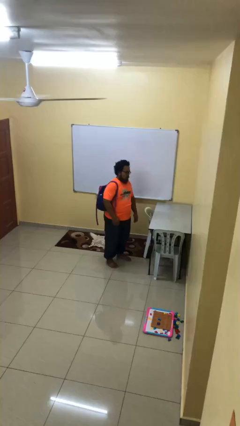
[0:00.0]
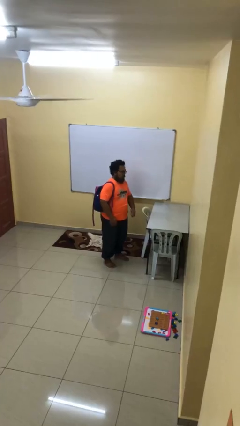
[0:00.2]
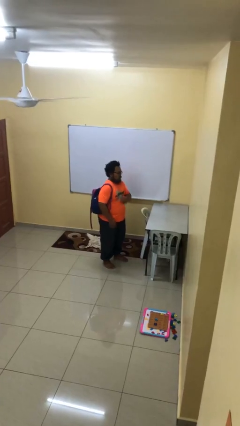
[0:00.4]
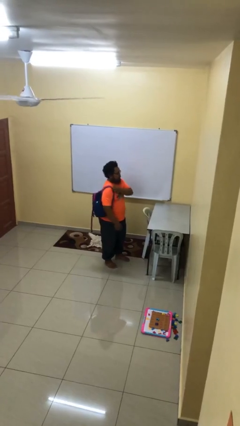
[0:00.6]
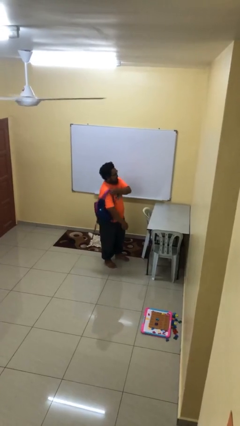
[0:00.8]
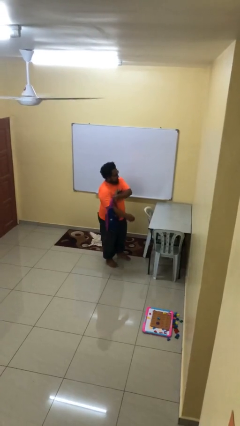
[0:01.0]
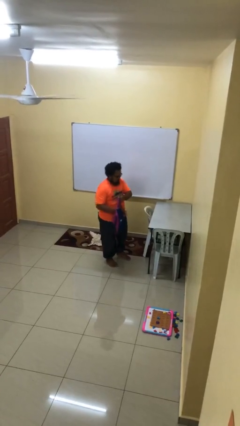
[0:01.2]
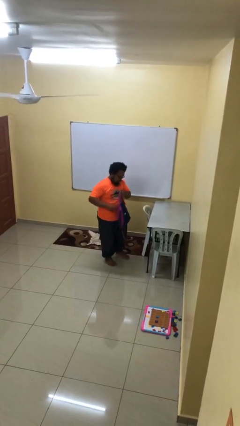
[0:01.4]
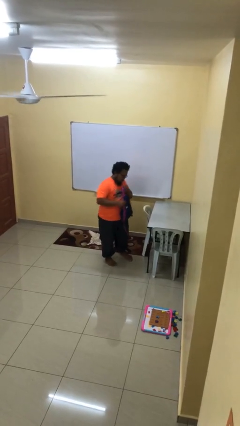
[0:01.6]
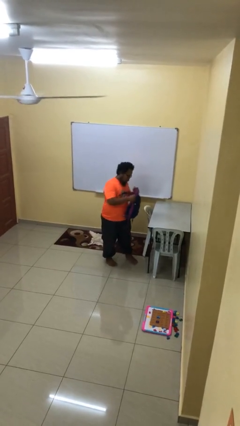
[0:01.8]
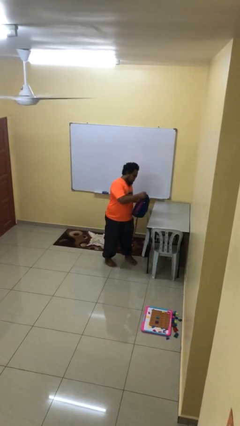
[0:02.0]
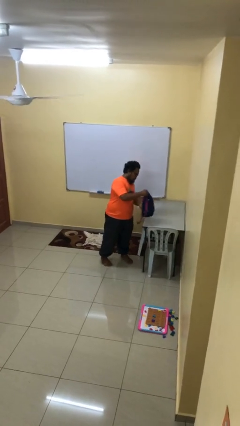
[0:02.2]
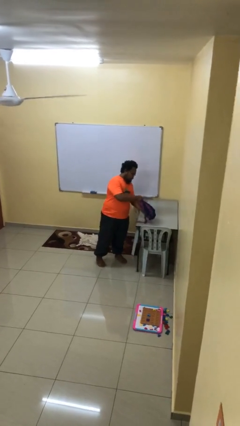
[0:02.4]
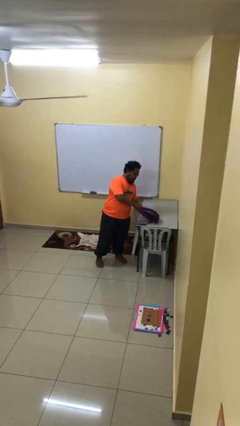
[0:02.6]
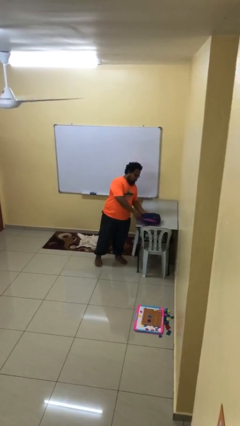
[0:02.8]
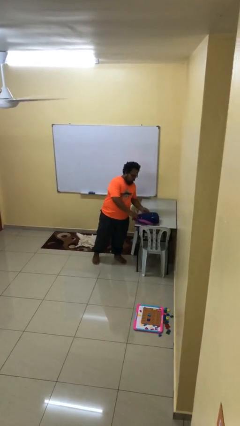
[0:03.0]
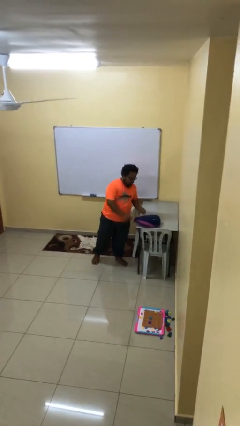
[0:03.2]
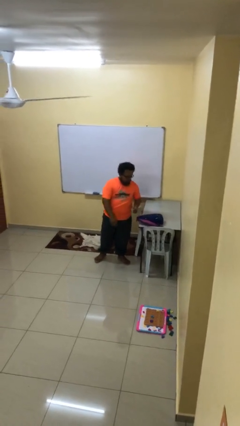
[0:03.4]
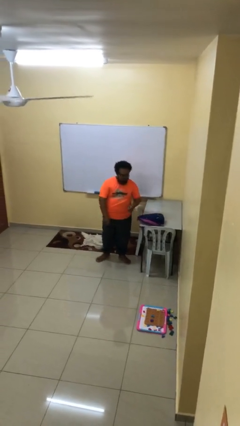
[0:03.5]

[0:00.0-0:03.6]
person puts down object on table

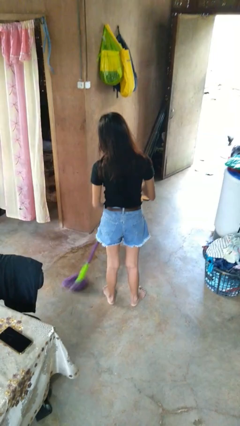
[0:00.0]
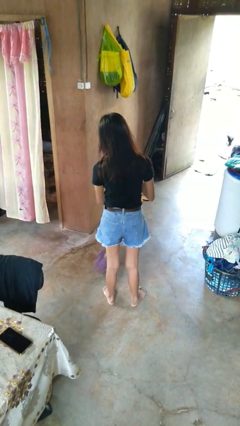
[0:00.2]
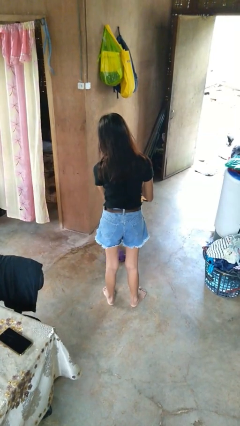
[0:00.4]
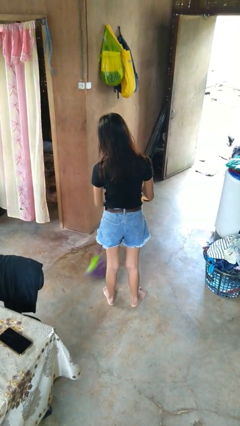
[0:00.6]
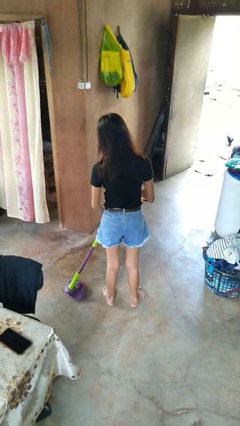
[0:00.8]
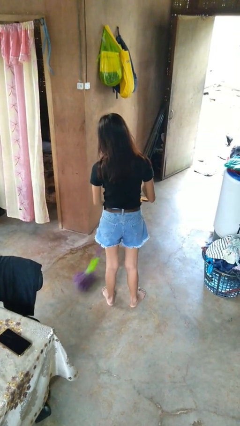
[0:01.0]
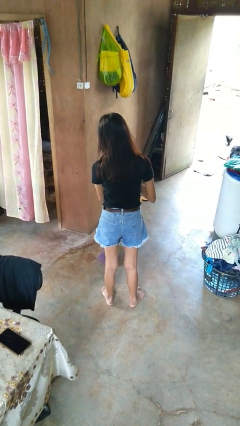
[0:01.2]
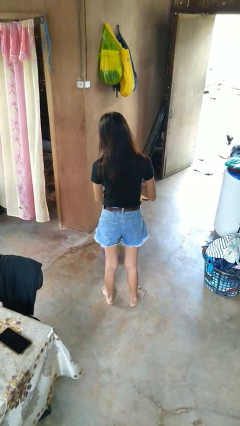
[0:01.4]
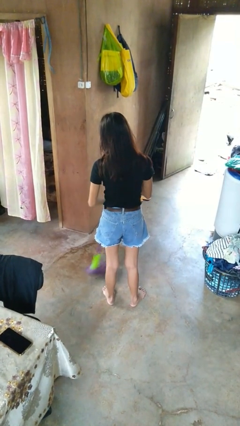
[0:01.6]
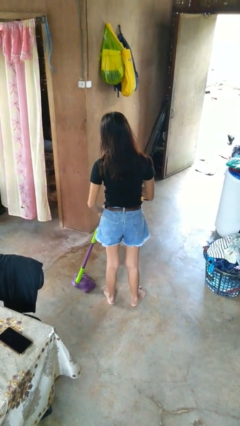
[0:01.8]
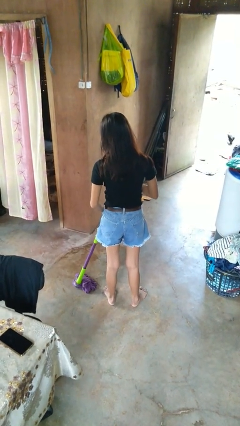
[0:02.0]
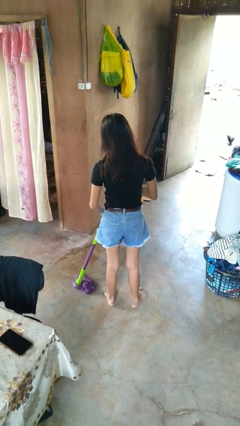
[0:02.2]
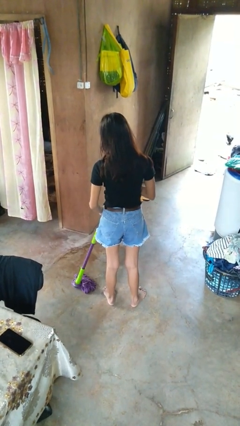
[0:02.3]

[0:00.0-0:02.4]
person mops

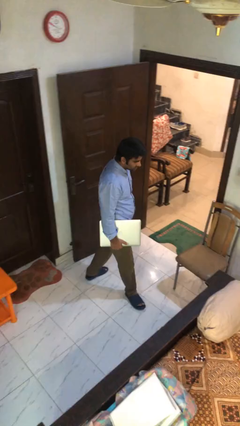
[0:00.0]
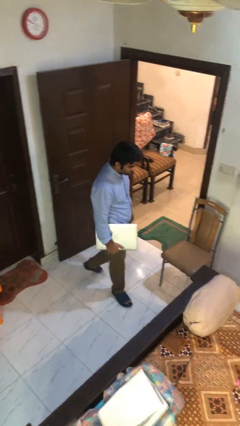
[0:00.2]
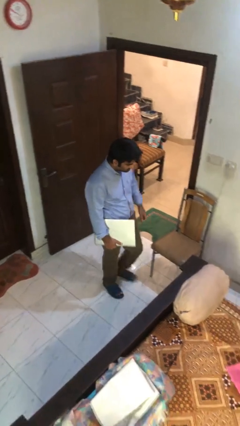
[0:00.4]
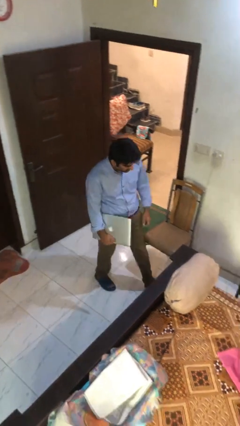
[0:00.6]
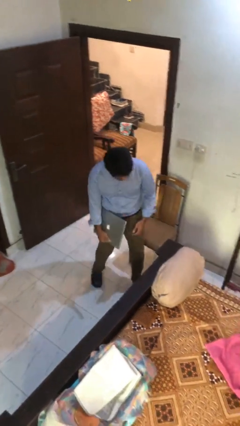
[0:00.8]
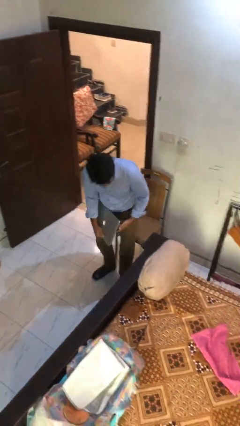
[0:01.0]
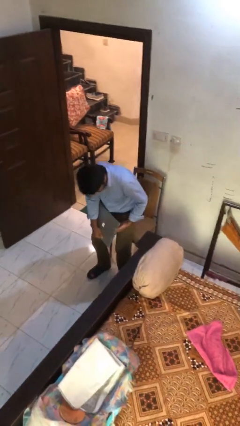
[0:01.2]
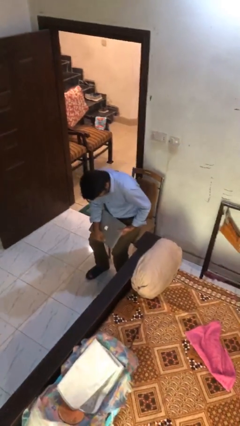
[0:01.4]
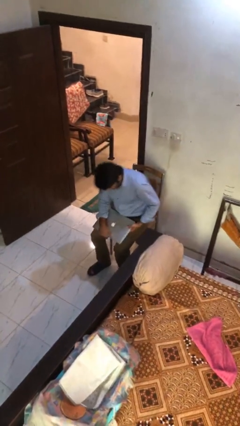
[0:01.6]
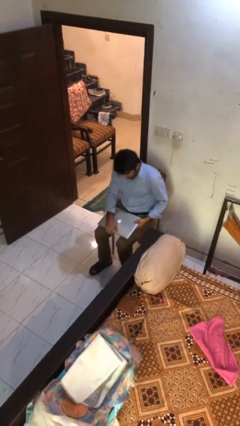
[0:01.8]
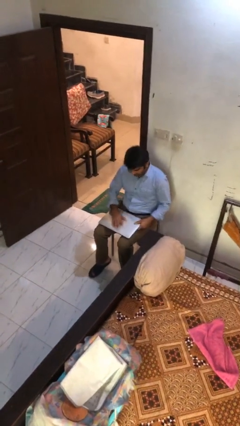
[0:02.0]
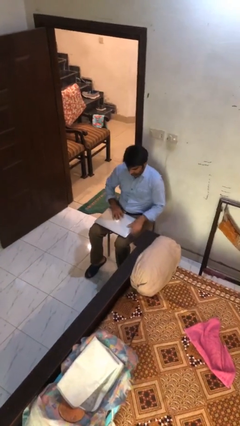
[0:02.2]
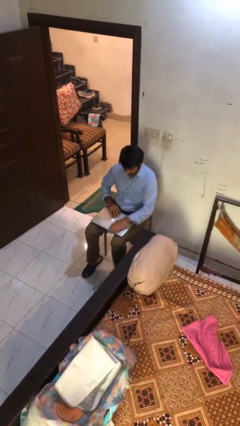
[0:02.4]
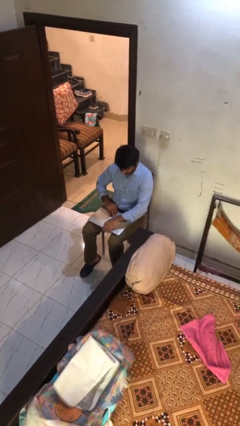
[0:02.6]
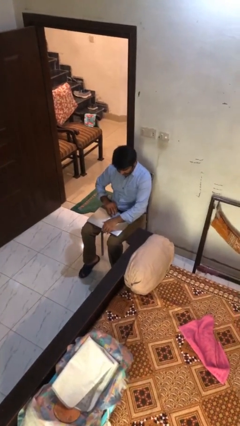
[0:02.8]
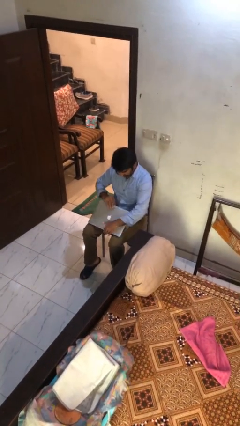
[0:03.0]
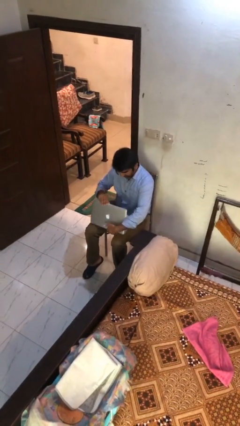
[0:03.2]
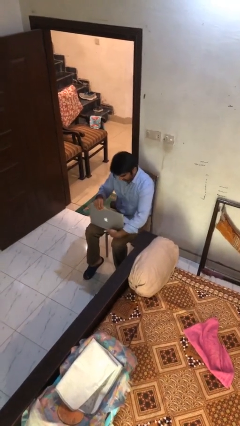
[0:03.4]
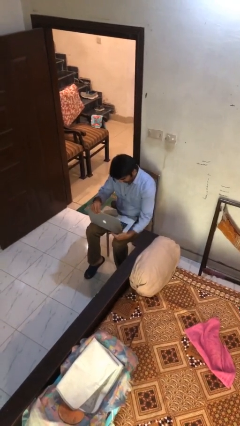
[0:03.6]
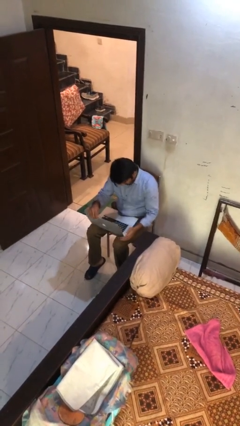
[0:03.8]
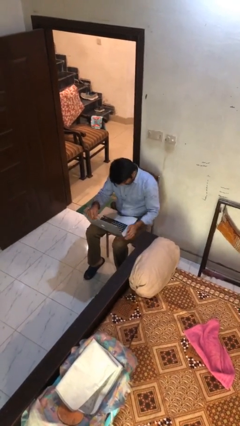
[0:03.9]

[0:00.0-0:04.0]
person sits down

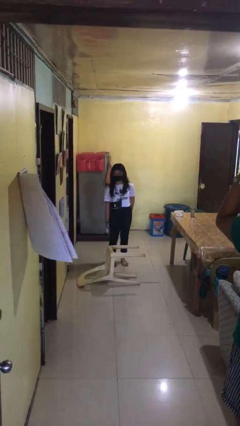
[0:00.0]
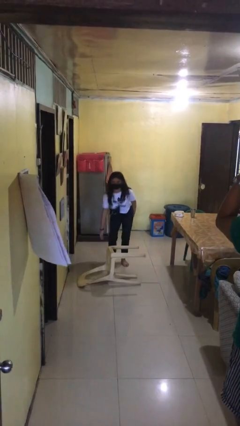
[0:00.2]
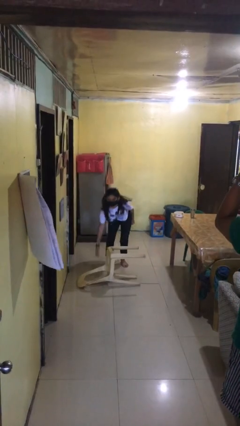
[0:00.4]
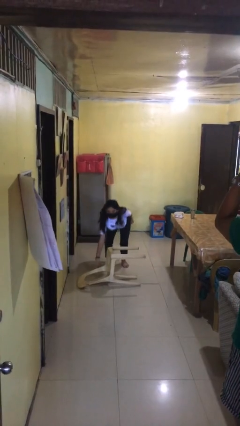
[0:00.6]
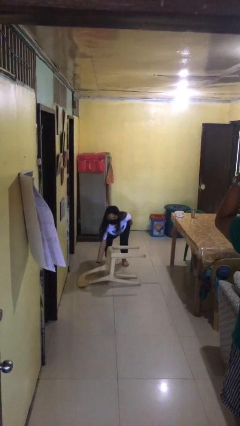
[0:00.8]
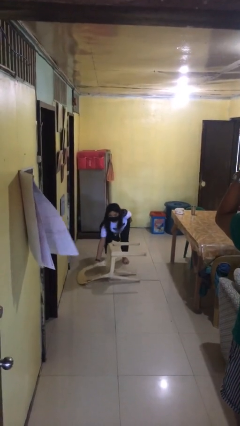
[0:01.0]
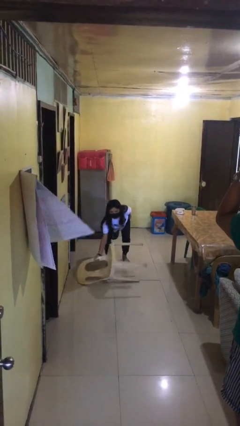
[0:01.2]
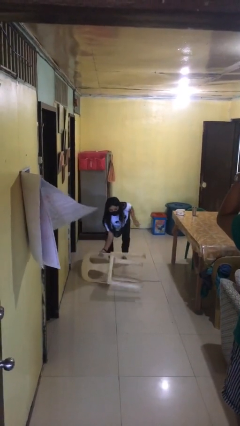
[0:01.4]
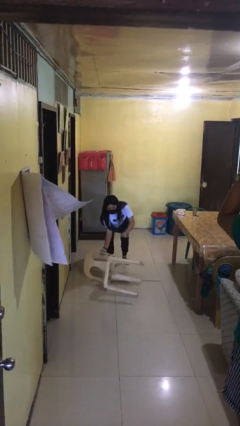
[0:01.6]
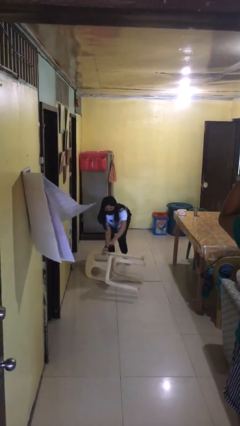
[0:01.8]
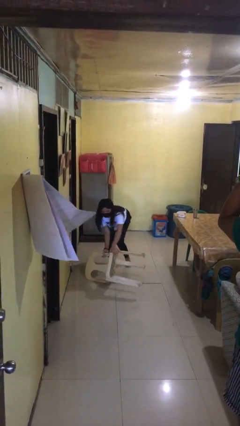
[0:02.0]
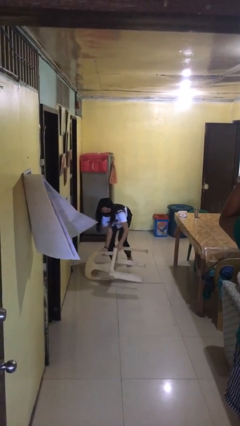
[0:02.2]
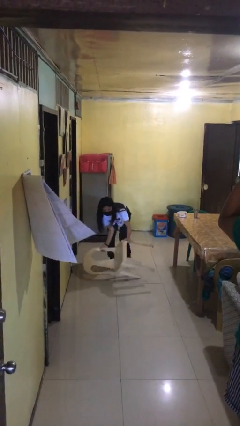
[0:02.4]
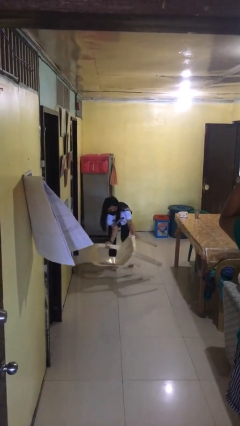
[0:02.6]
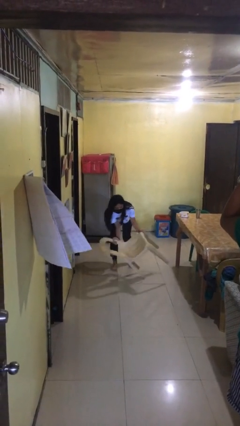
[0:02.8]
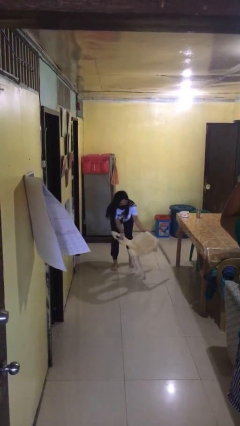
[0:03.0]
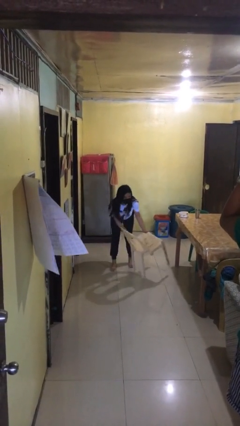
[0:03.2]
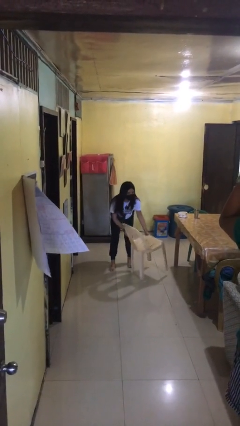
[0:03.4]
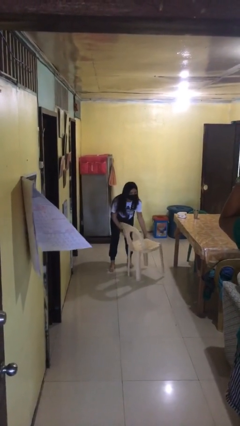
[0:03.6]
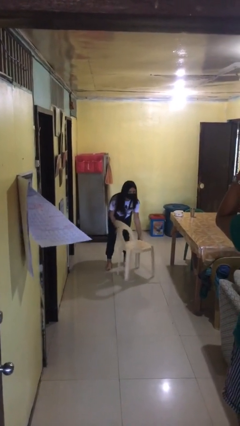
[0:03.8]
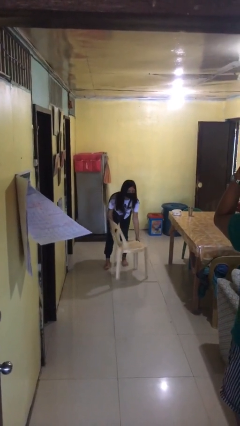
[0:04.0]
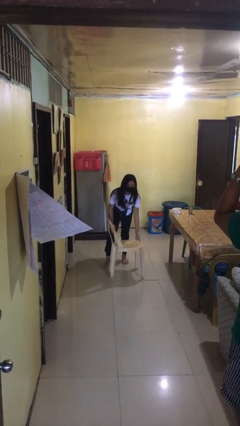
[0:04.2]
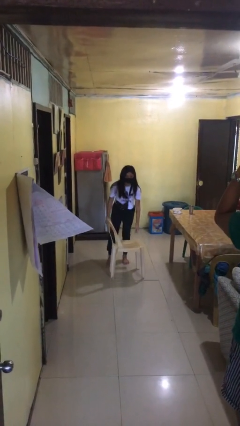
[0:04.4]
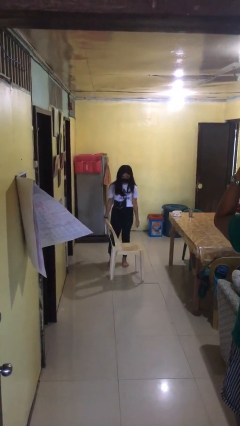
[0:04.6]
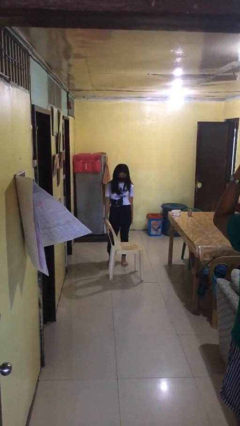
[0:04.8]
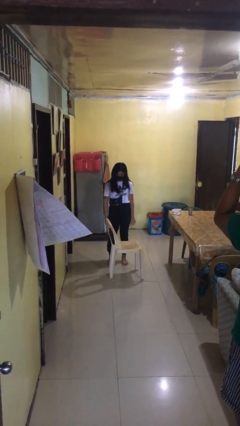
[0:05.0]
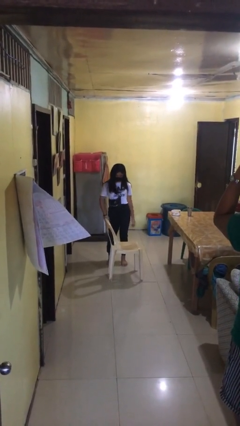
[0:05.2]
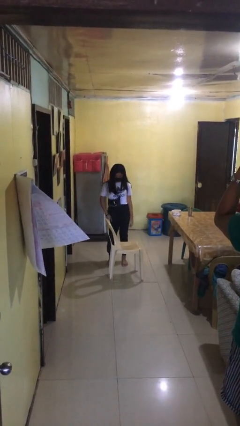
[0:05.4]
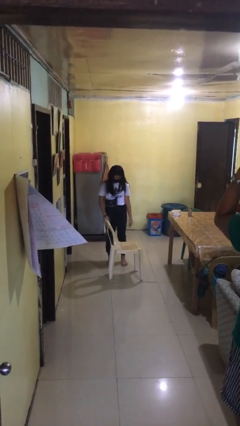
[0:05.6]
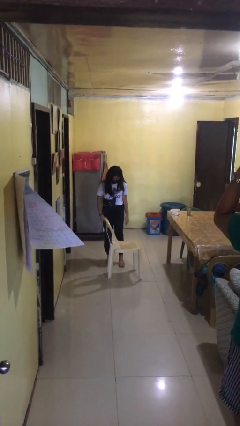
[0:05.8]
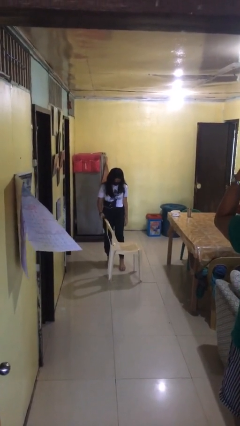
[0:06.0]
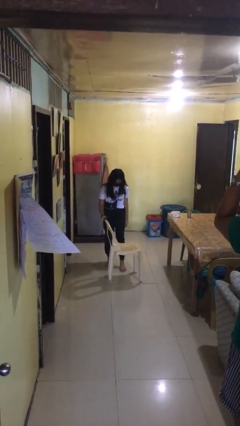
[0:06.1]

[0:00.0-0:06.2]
person sets upright furniture

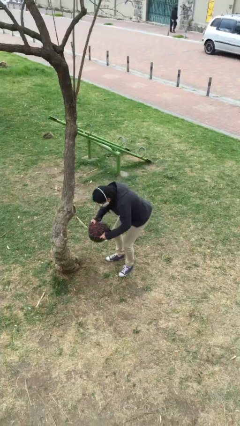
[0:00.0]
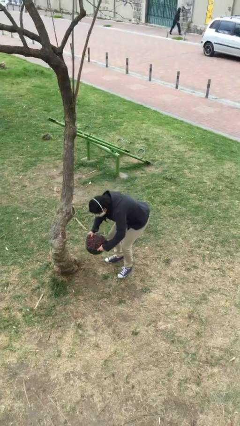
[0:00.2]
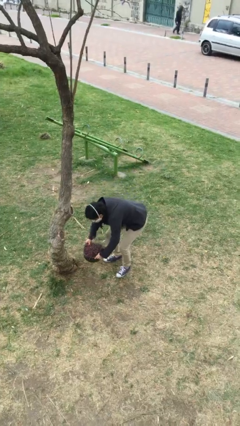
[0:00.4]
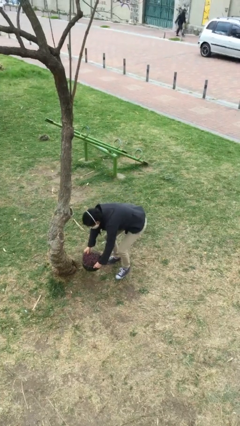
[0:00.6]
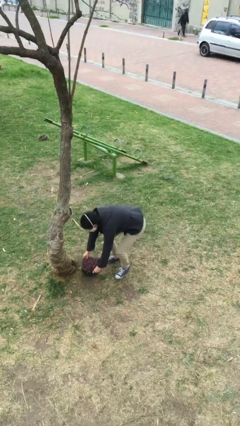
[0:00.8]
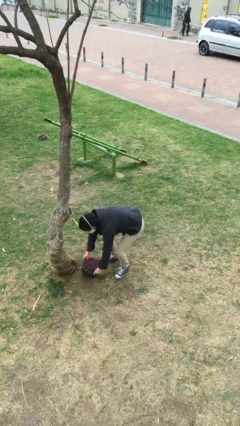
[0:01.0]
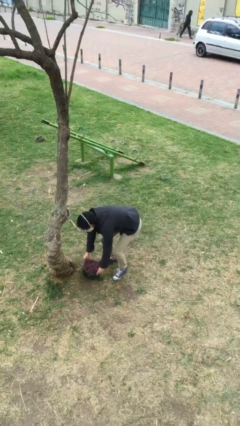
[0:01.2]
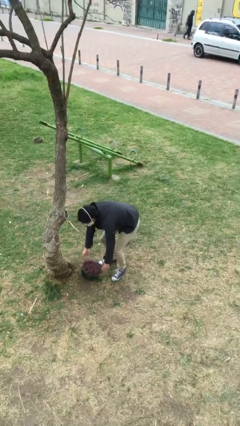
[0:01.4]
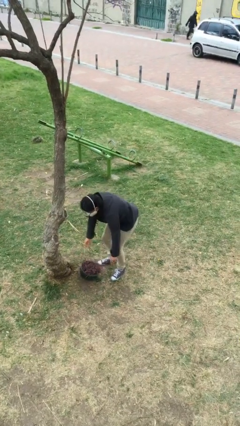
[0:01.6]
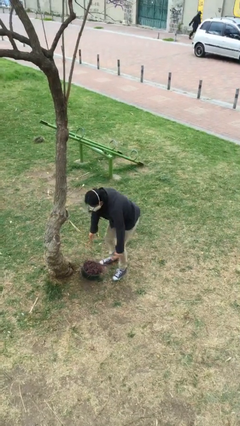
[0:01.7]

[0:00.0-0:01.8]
person puts down object on floor
